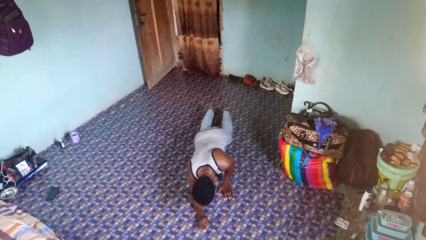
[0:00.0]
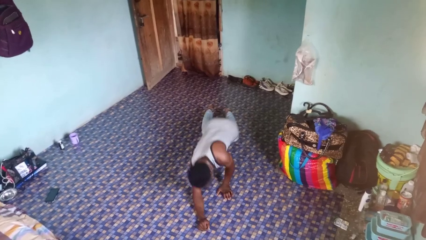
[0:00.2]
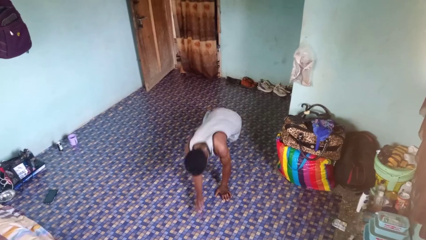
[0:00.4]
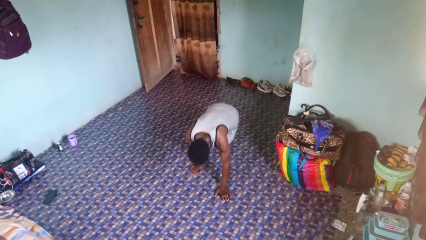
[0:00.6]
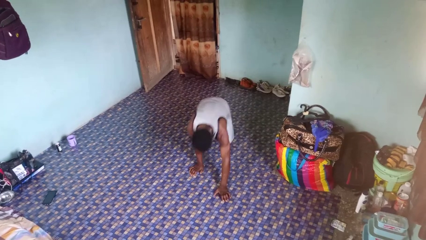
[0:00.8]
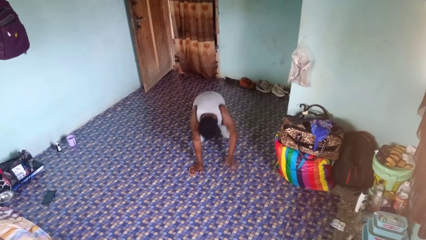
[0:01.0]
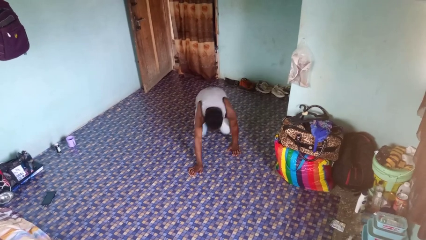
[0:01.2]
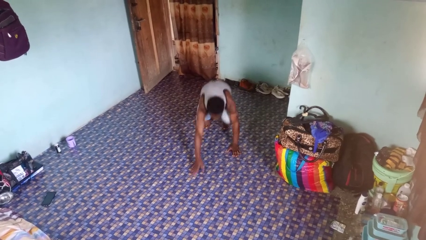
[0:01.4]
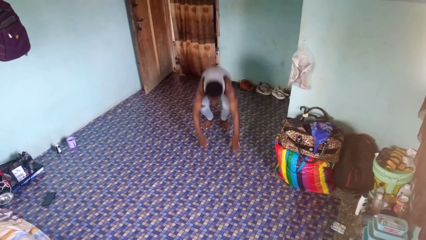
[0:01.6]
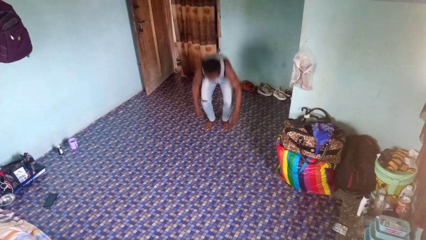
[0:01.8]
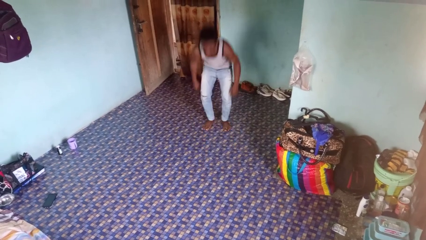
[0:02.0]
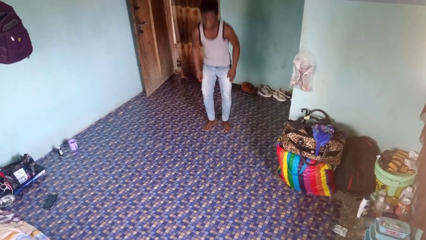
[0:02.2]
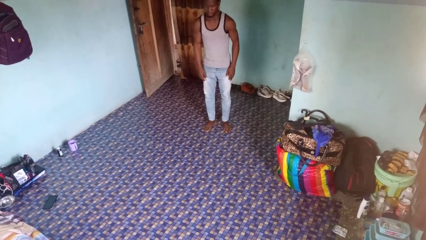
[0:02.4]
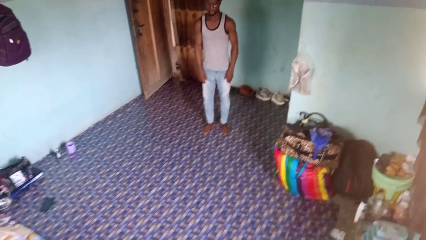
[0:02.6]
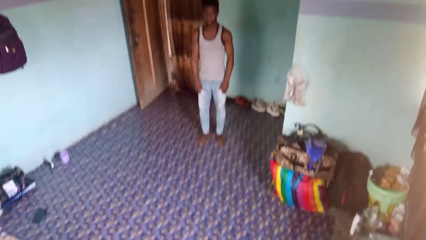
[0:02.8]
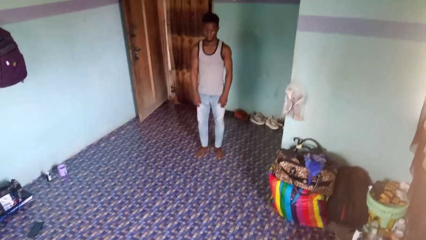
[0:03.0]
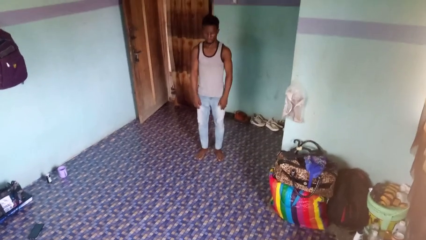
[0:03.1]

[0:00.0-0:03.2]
person stands up from floor

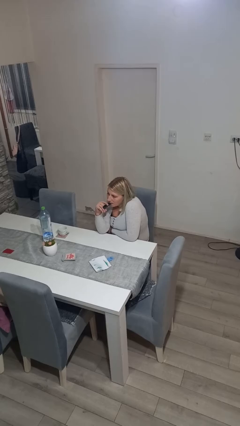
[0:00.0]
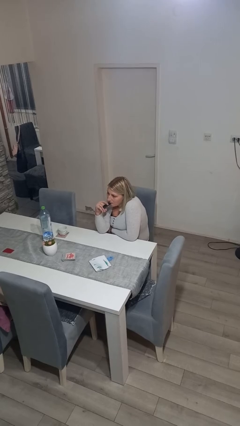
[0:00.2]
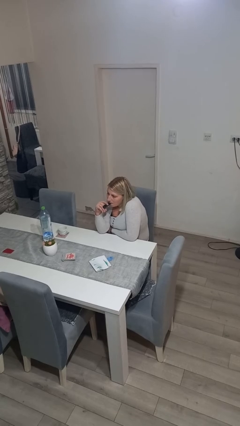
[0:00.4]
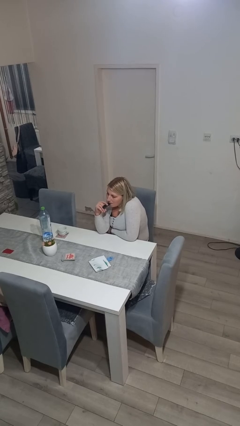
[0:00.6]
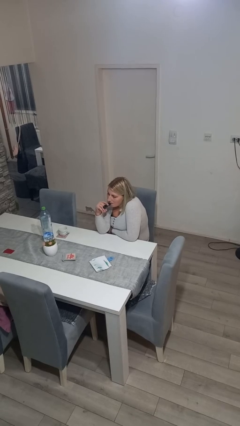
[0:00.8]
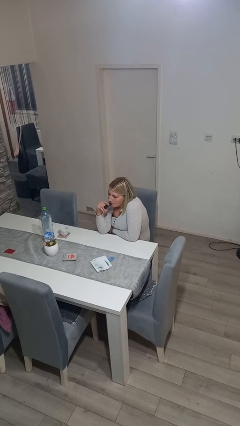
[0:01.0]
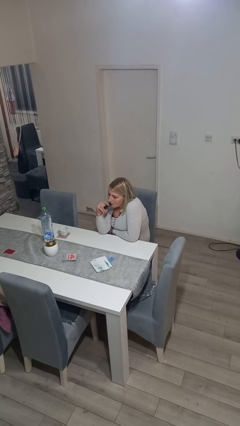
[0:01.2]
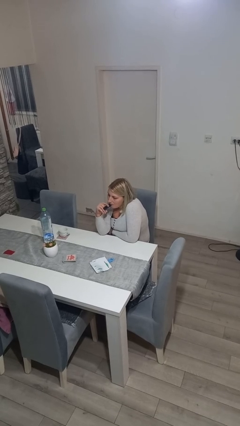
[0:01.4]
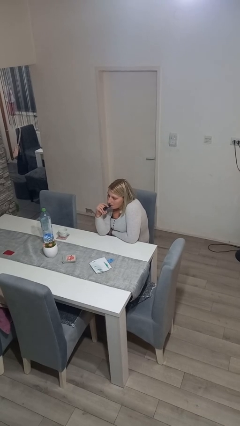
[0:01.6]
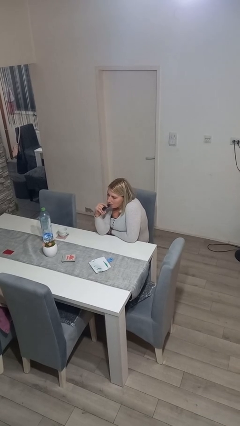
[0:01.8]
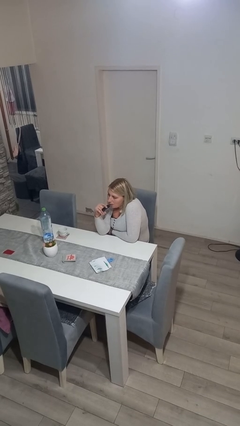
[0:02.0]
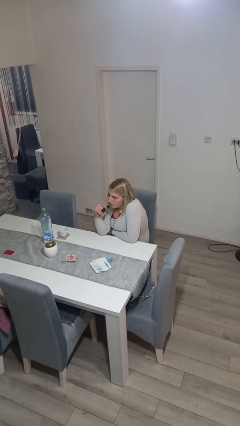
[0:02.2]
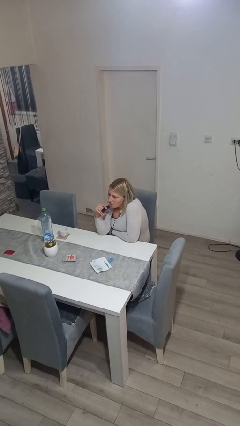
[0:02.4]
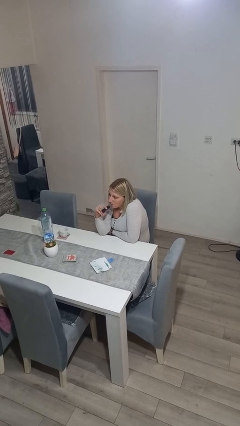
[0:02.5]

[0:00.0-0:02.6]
person vapes

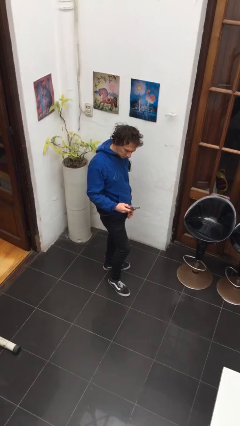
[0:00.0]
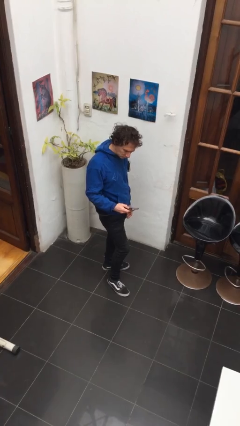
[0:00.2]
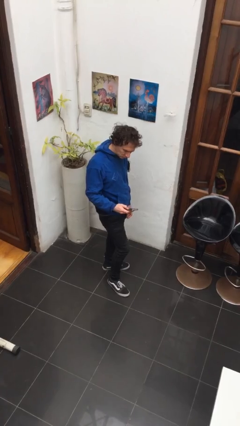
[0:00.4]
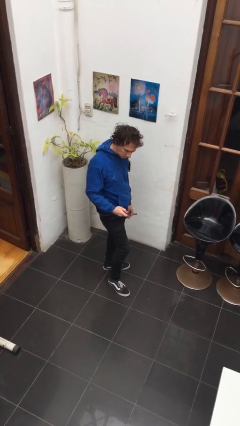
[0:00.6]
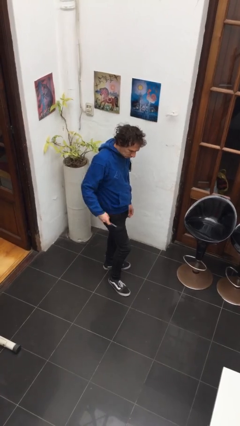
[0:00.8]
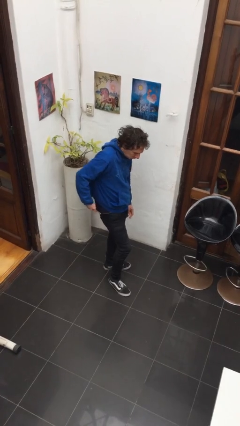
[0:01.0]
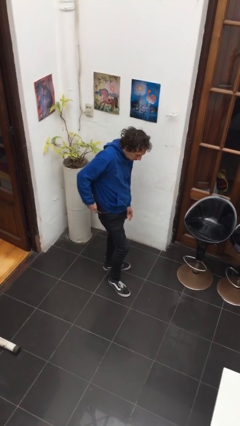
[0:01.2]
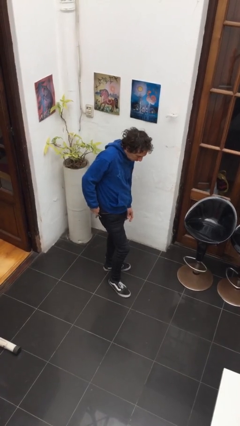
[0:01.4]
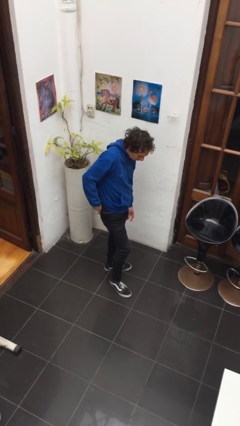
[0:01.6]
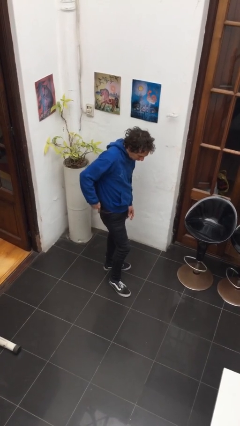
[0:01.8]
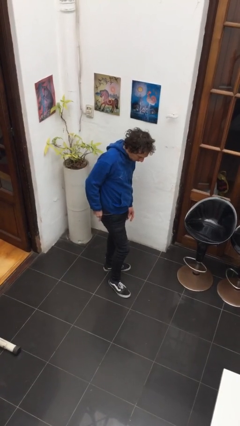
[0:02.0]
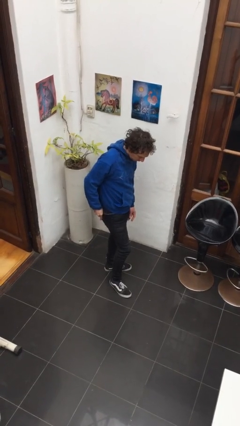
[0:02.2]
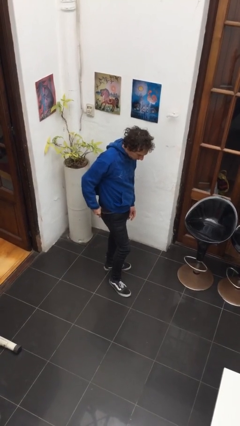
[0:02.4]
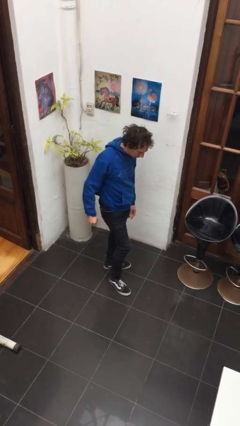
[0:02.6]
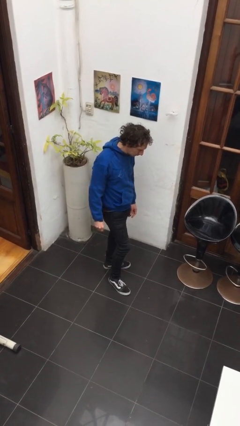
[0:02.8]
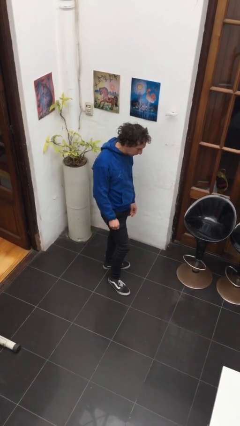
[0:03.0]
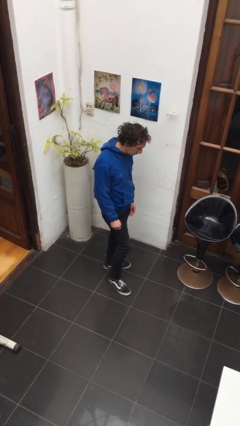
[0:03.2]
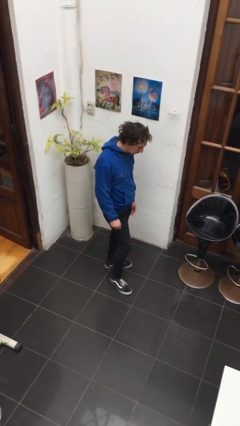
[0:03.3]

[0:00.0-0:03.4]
person puts phone into pocket

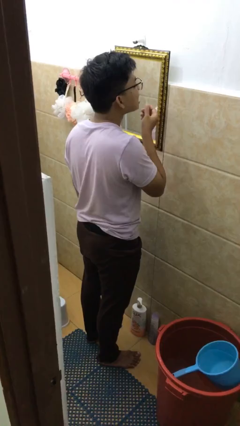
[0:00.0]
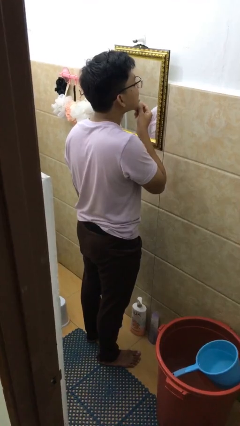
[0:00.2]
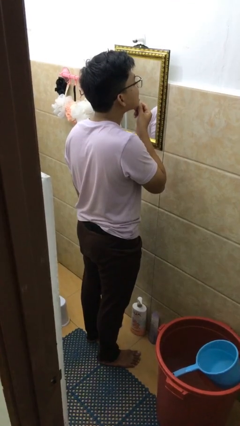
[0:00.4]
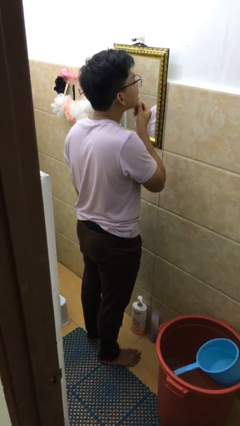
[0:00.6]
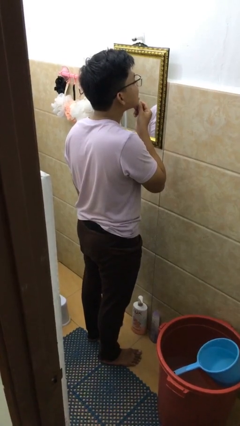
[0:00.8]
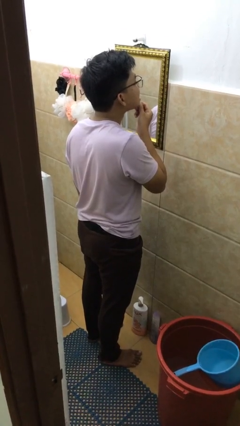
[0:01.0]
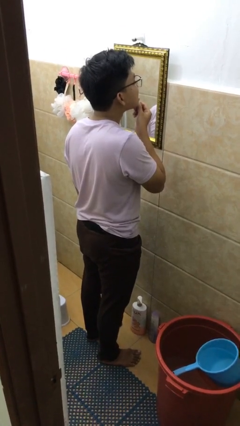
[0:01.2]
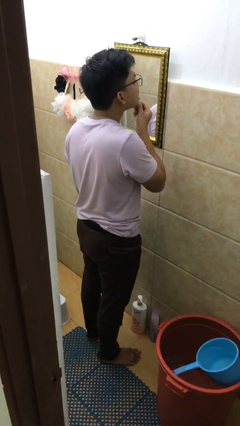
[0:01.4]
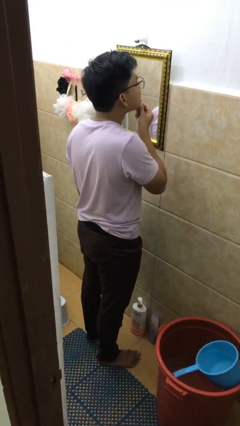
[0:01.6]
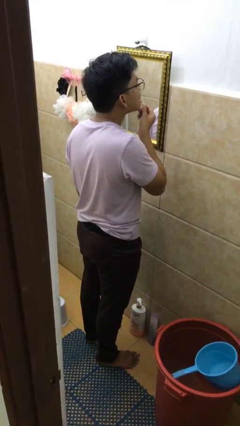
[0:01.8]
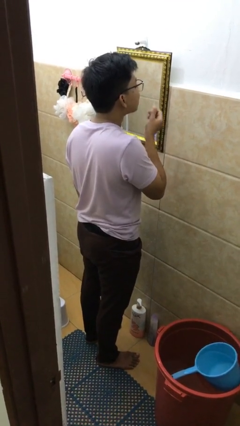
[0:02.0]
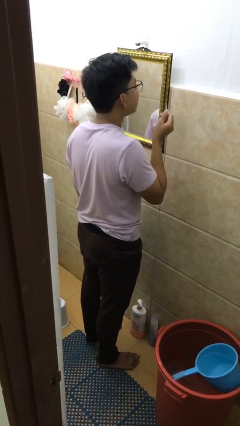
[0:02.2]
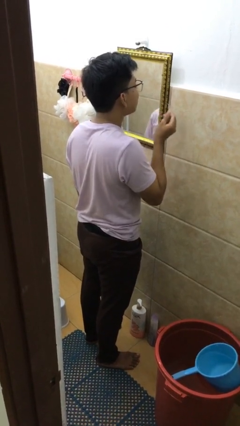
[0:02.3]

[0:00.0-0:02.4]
person flosses

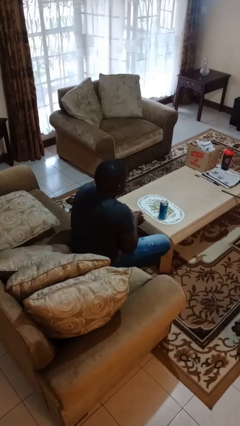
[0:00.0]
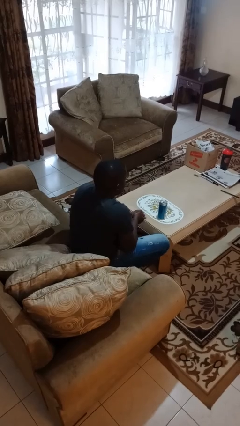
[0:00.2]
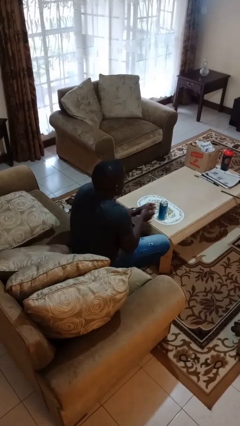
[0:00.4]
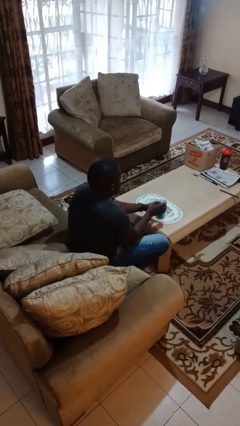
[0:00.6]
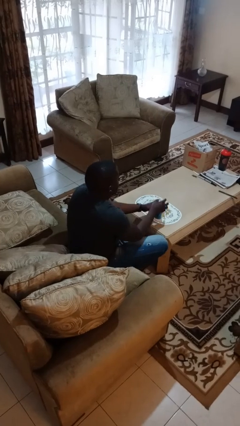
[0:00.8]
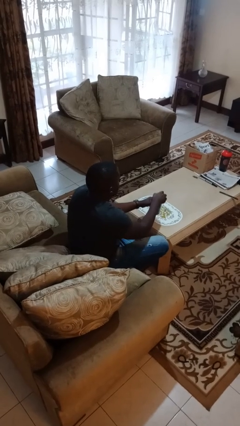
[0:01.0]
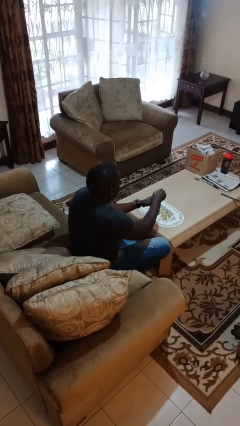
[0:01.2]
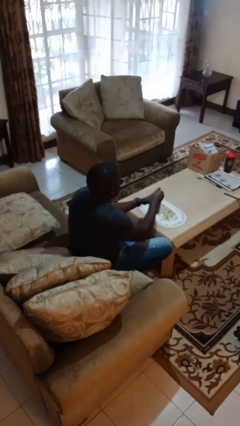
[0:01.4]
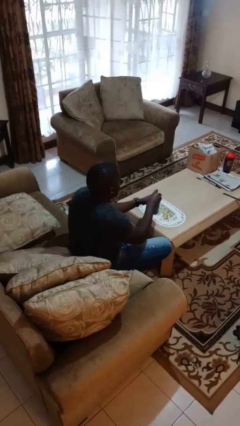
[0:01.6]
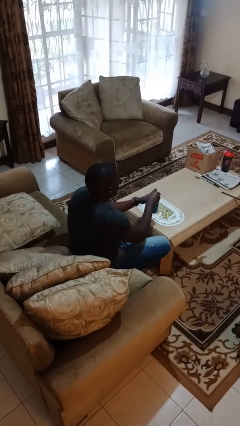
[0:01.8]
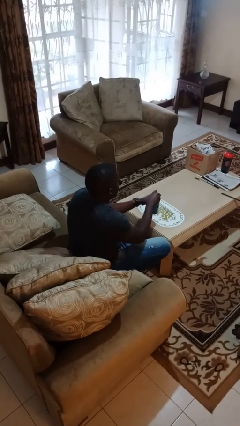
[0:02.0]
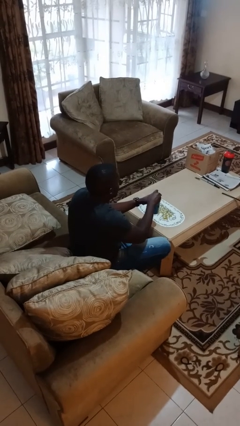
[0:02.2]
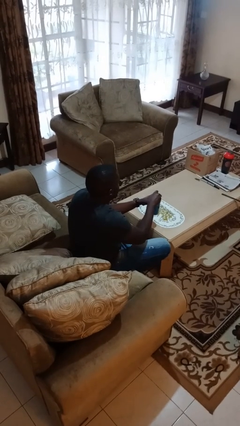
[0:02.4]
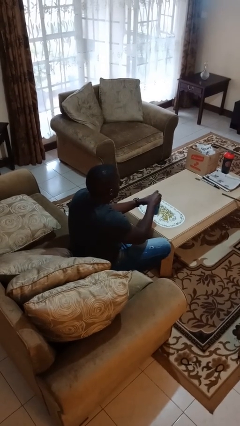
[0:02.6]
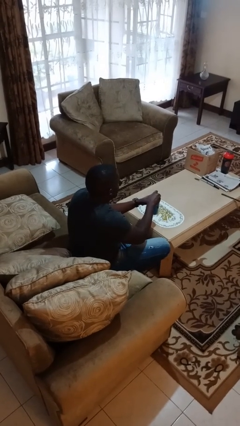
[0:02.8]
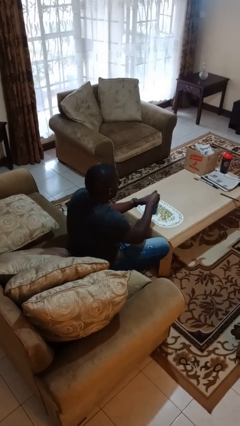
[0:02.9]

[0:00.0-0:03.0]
person opens beverage can

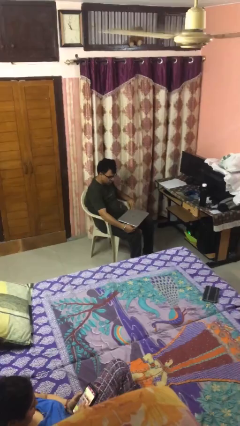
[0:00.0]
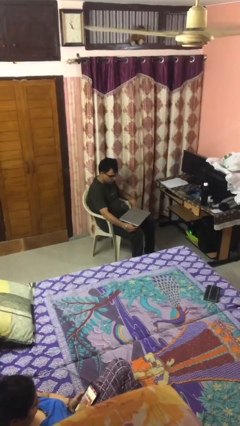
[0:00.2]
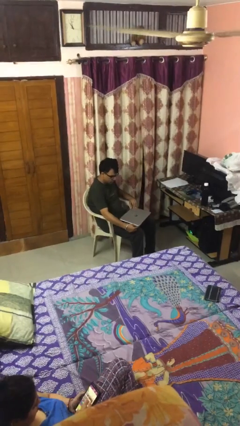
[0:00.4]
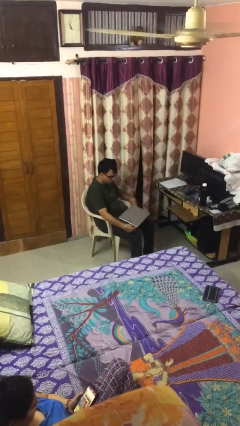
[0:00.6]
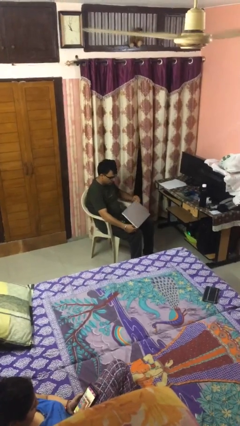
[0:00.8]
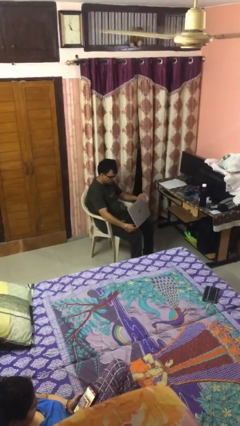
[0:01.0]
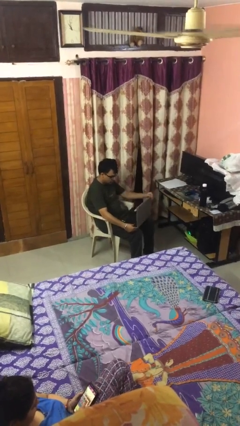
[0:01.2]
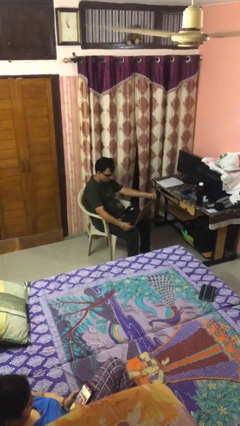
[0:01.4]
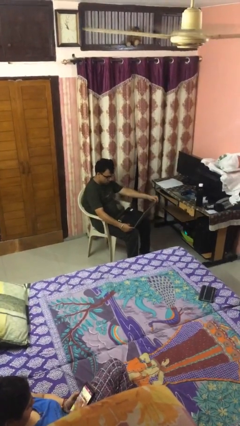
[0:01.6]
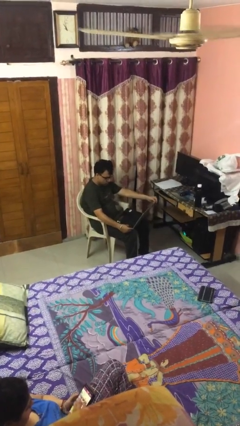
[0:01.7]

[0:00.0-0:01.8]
person opens laptop

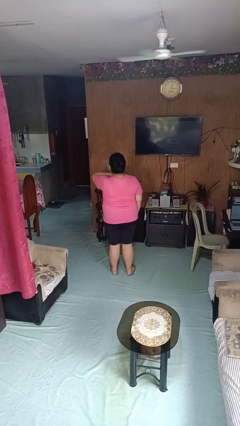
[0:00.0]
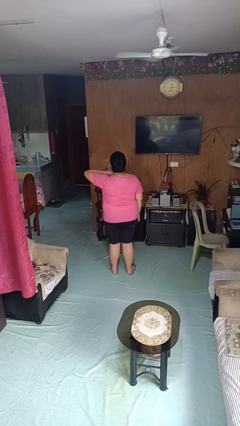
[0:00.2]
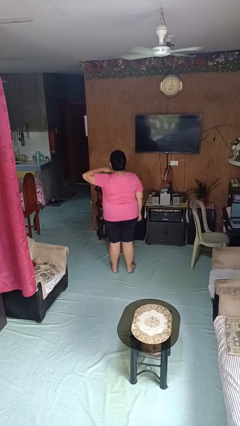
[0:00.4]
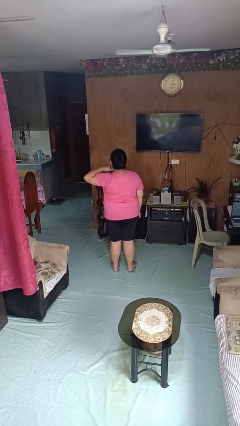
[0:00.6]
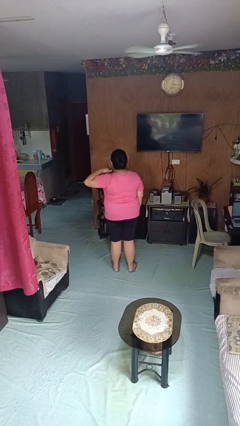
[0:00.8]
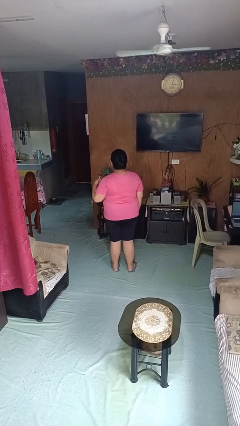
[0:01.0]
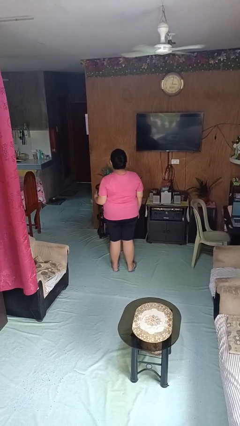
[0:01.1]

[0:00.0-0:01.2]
person gestures cut
